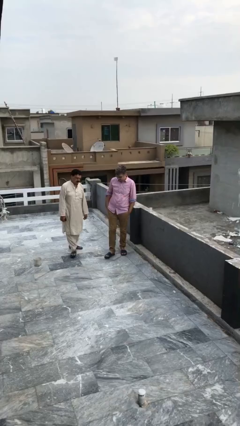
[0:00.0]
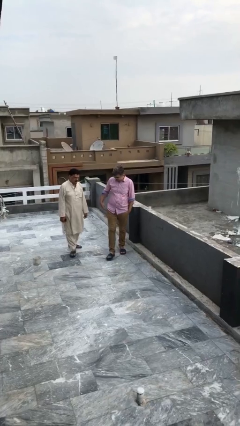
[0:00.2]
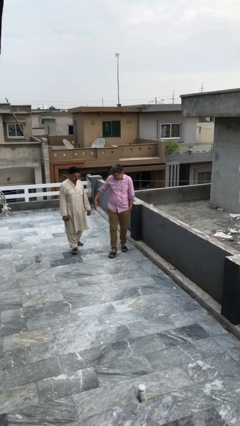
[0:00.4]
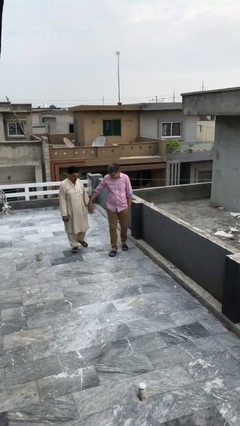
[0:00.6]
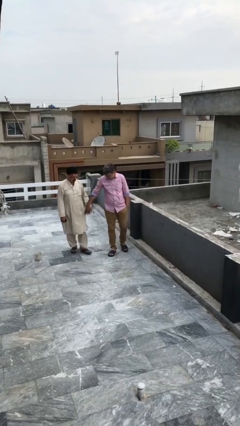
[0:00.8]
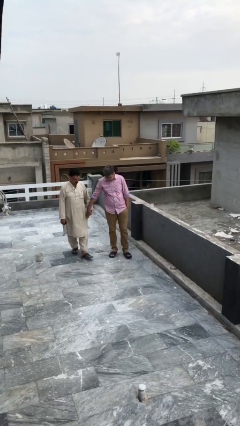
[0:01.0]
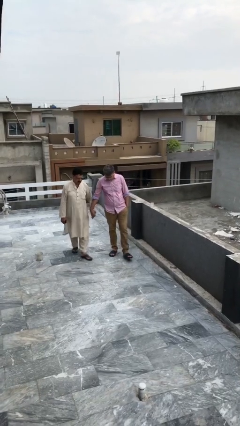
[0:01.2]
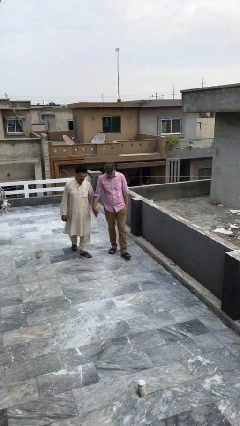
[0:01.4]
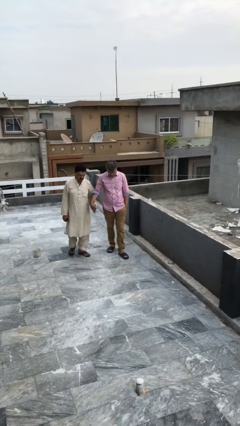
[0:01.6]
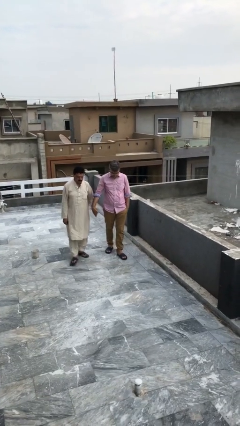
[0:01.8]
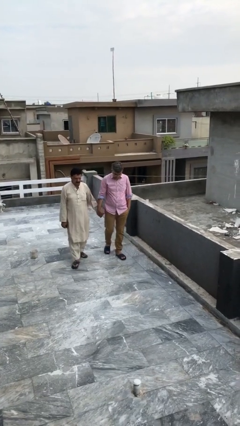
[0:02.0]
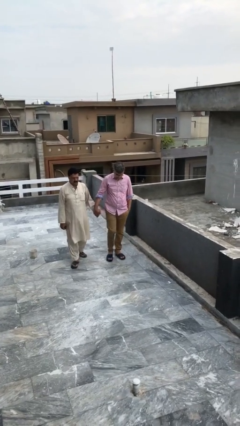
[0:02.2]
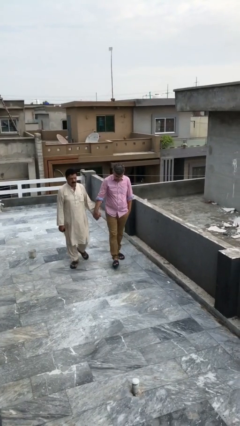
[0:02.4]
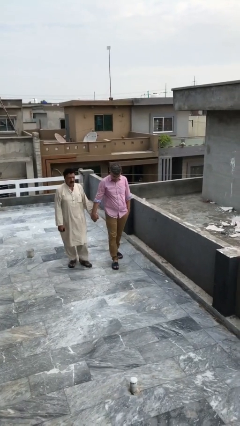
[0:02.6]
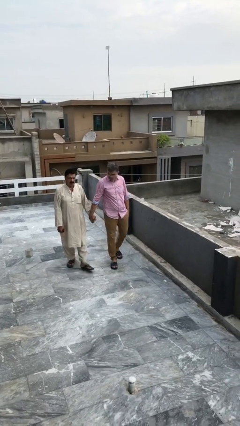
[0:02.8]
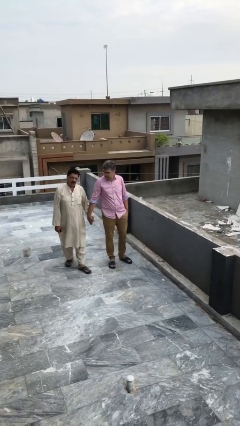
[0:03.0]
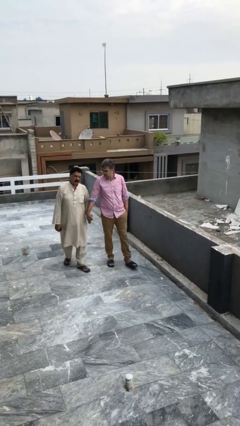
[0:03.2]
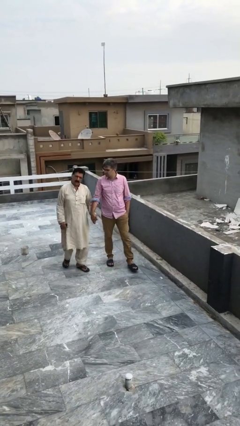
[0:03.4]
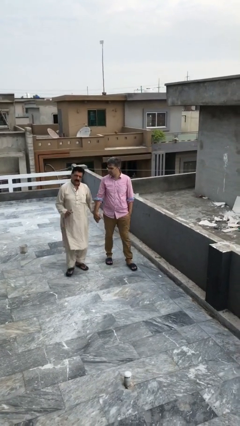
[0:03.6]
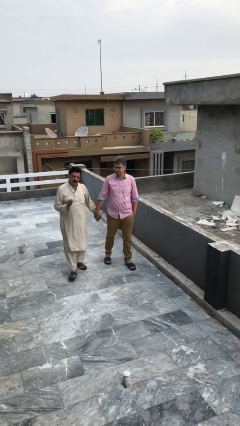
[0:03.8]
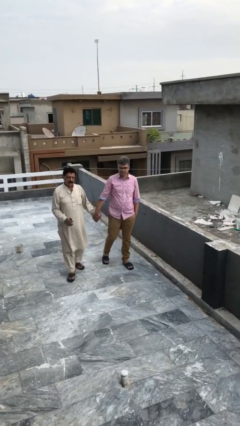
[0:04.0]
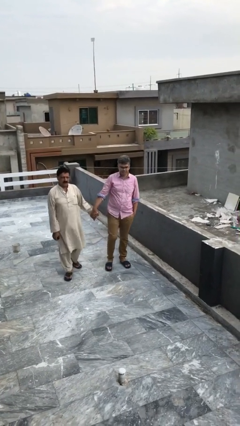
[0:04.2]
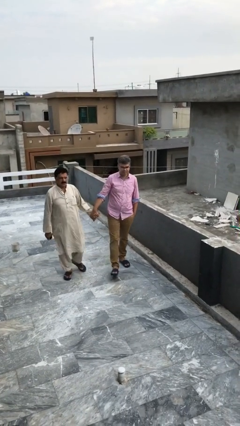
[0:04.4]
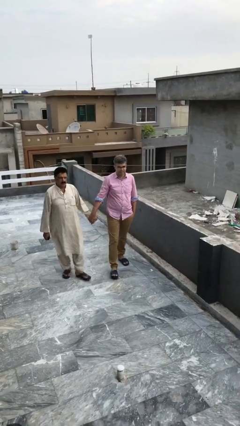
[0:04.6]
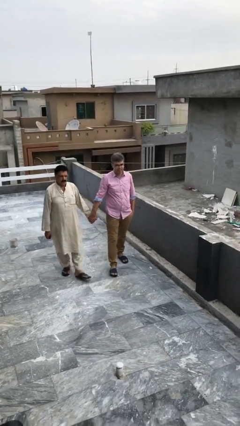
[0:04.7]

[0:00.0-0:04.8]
person holds hand

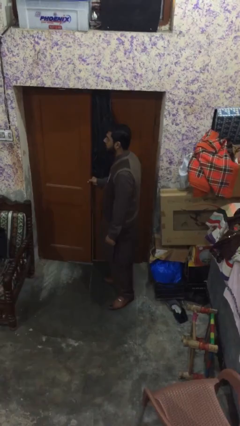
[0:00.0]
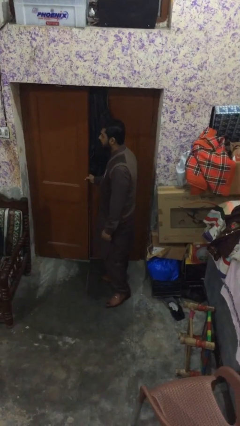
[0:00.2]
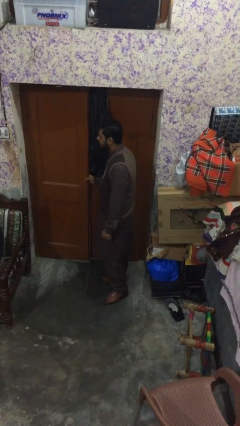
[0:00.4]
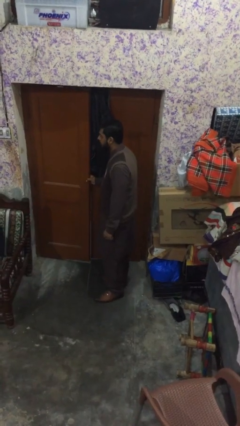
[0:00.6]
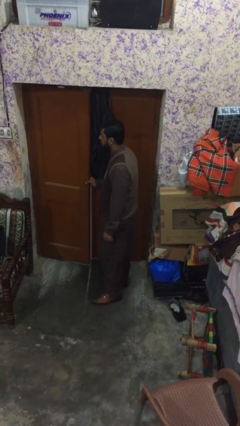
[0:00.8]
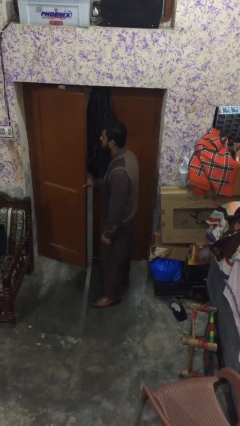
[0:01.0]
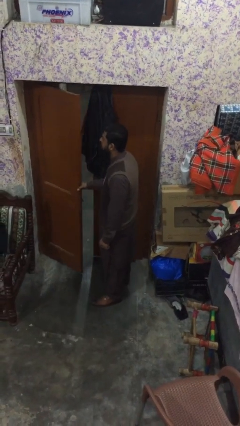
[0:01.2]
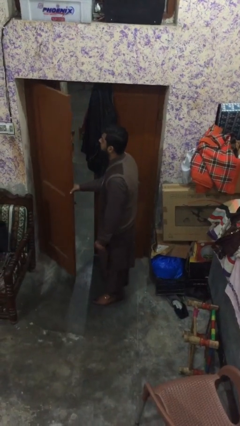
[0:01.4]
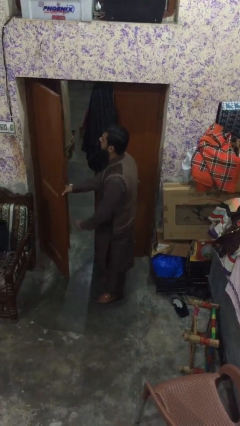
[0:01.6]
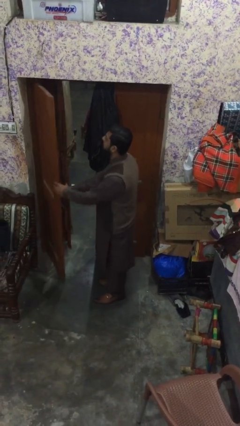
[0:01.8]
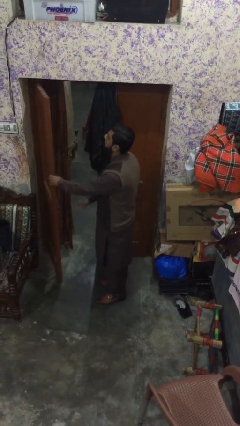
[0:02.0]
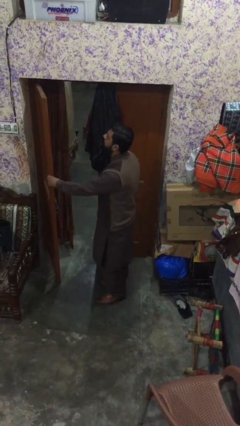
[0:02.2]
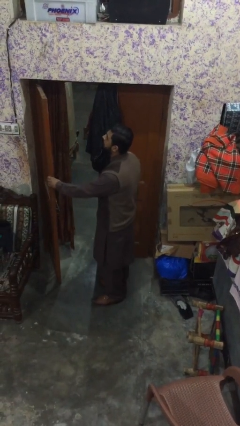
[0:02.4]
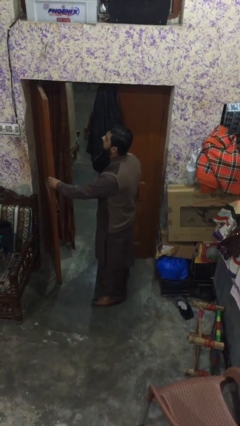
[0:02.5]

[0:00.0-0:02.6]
person opens facility door

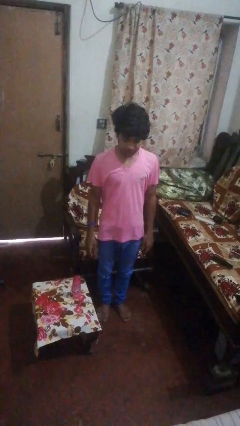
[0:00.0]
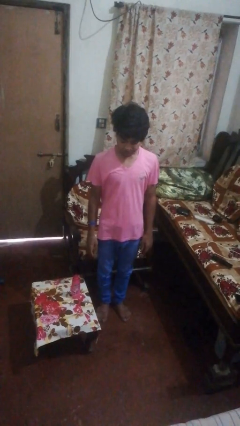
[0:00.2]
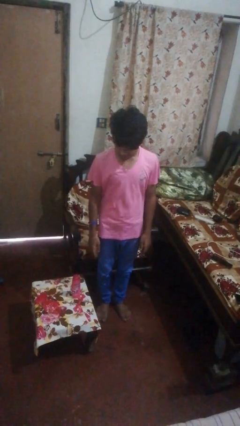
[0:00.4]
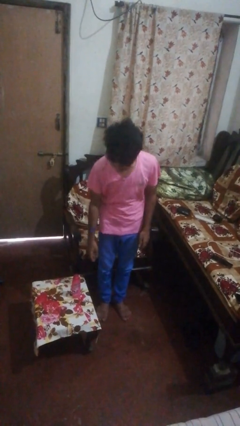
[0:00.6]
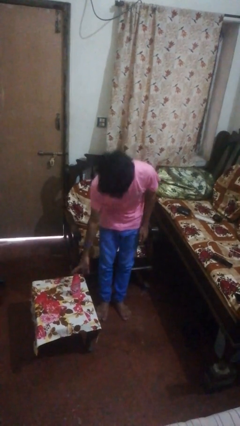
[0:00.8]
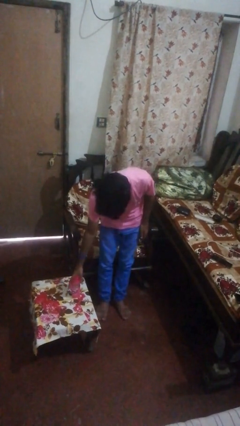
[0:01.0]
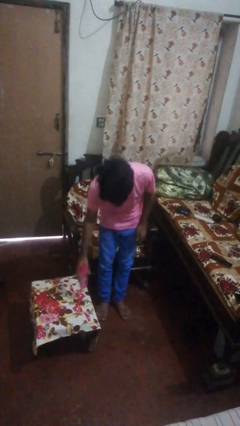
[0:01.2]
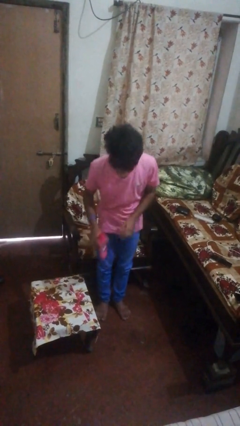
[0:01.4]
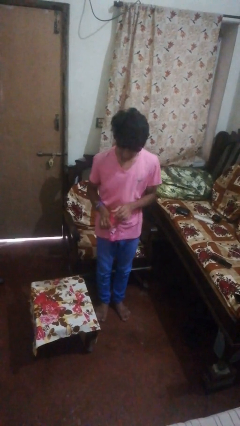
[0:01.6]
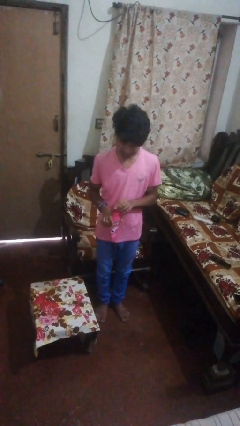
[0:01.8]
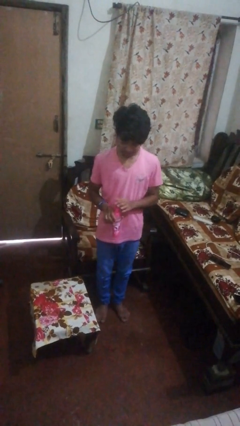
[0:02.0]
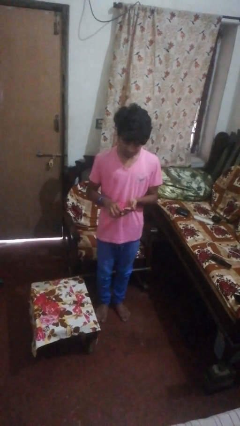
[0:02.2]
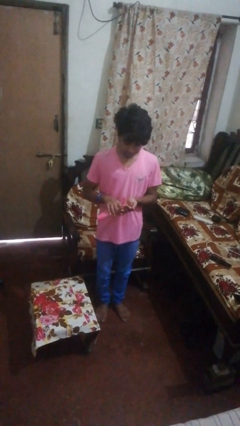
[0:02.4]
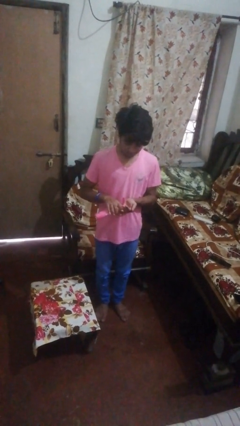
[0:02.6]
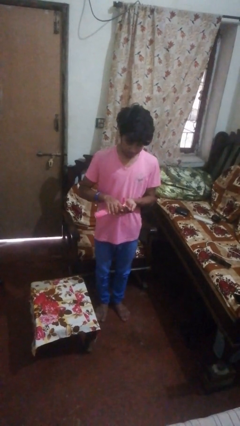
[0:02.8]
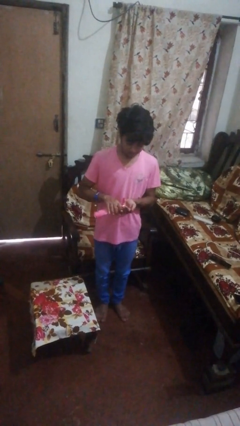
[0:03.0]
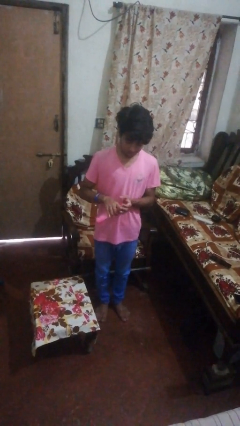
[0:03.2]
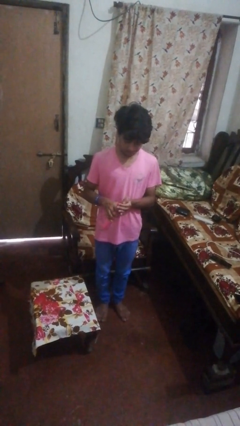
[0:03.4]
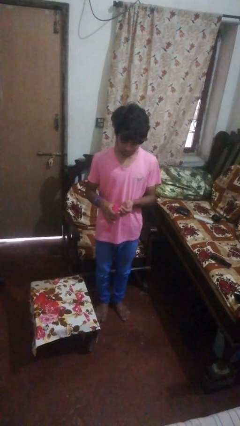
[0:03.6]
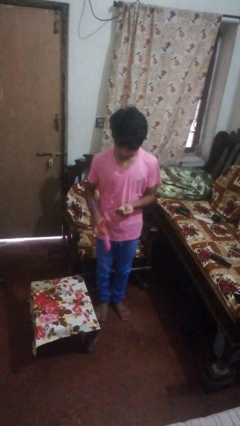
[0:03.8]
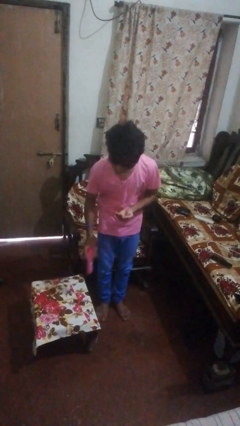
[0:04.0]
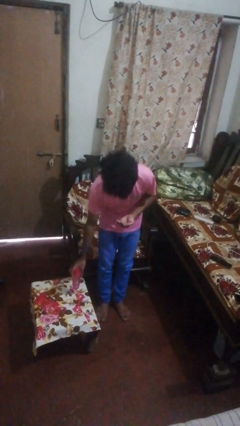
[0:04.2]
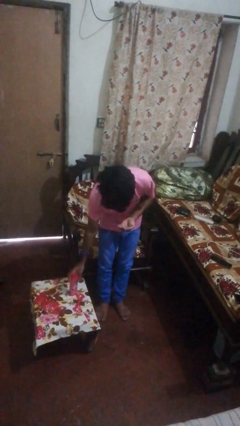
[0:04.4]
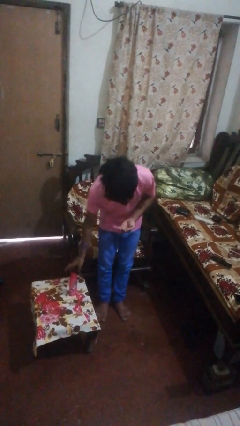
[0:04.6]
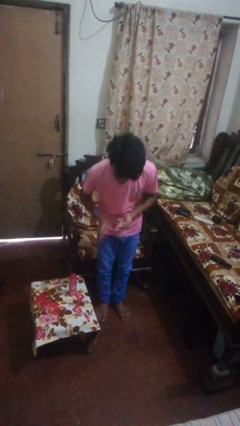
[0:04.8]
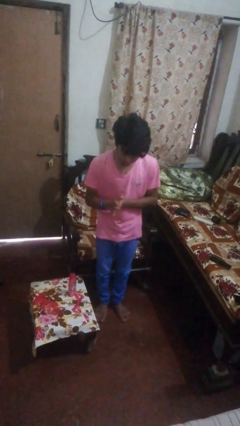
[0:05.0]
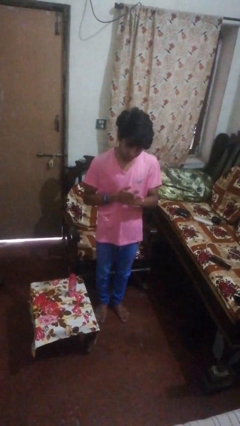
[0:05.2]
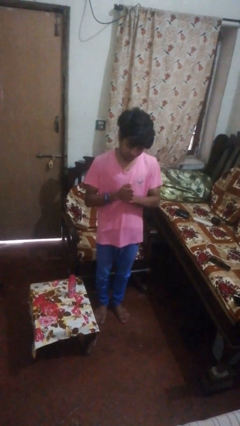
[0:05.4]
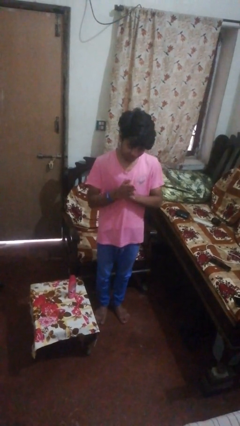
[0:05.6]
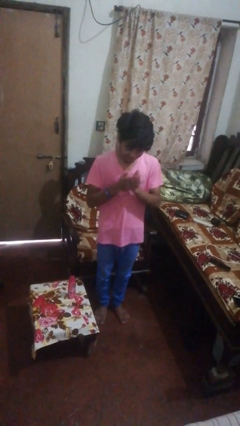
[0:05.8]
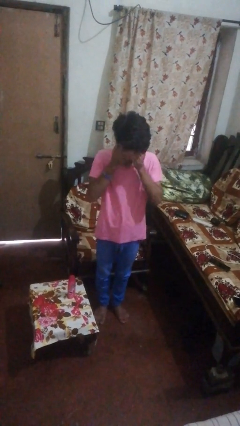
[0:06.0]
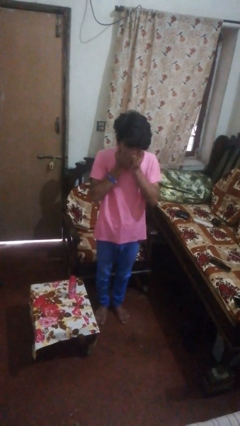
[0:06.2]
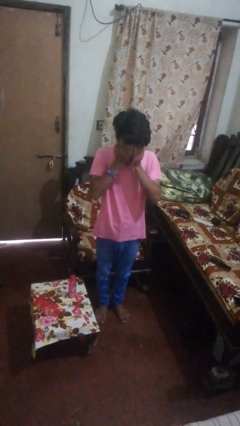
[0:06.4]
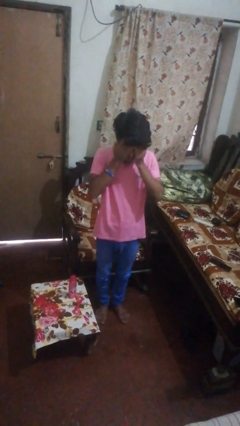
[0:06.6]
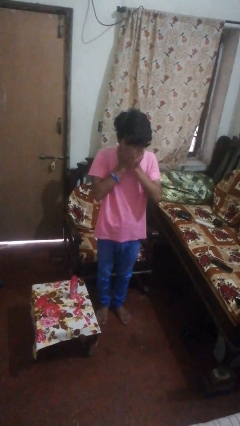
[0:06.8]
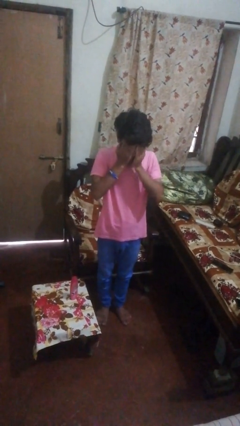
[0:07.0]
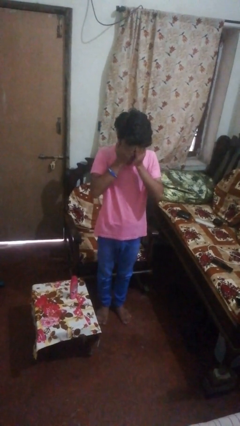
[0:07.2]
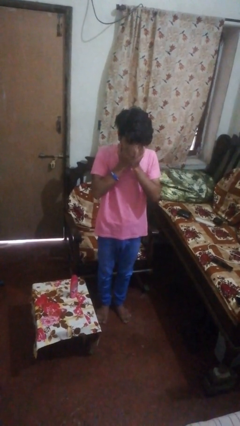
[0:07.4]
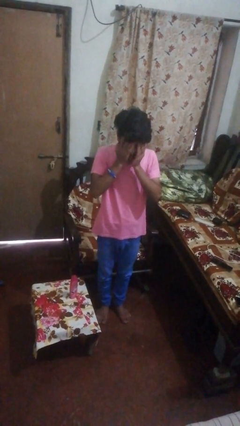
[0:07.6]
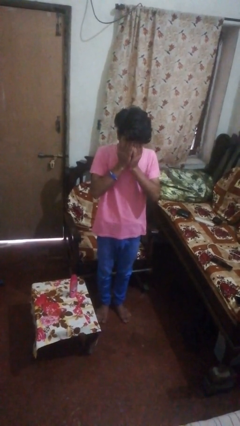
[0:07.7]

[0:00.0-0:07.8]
person applies sunscreen

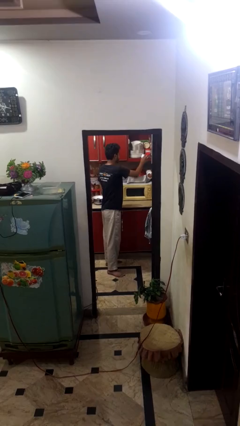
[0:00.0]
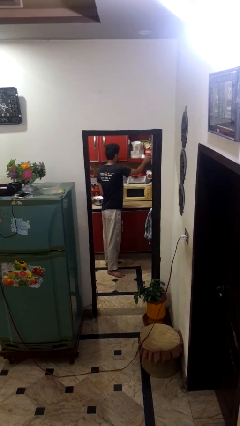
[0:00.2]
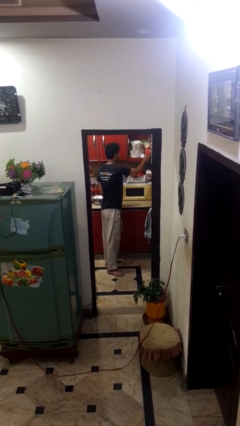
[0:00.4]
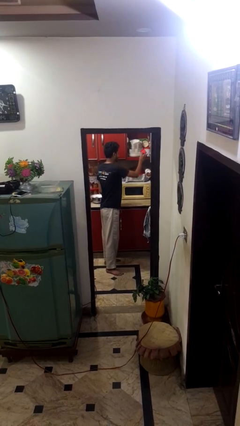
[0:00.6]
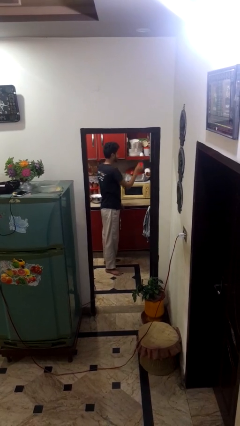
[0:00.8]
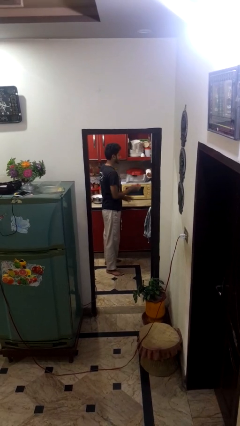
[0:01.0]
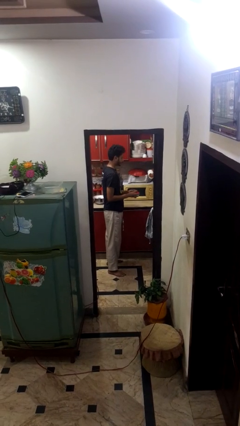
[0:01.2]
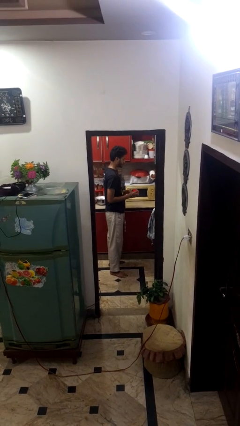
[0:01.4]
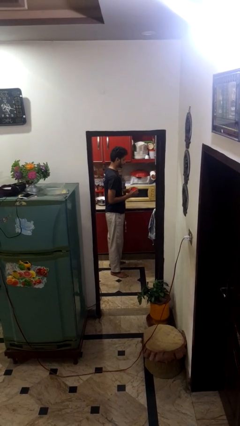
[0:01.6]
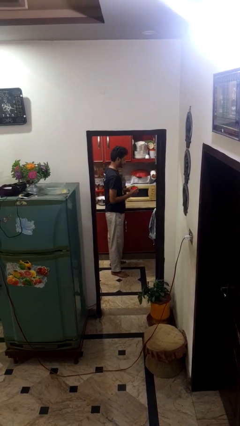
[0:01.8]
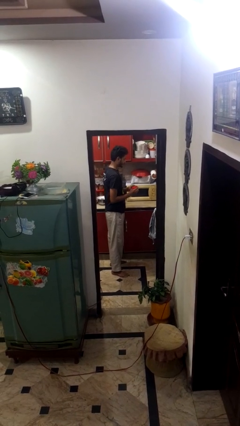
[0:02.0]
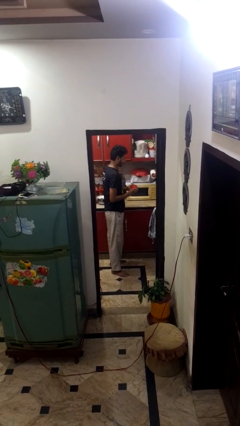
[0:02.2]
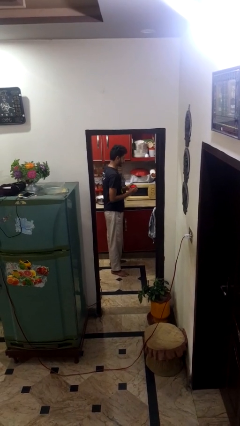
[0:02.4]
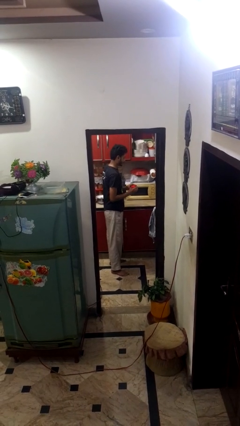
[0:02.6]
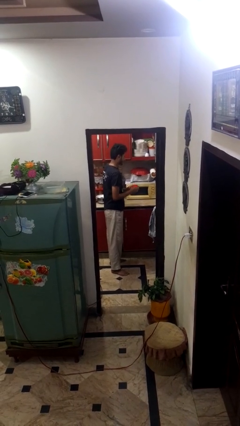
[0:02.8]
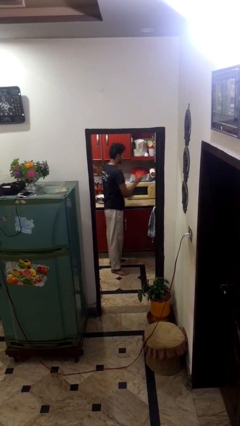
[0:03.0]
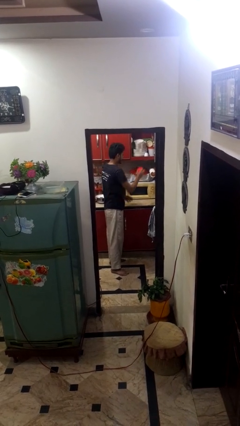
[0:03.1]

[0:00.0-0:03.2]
person picks up object from cabinet
